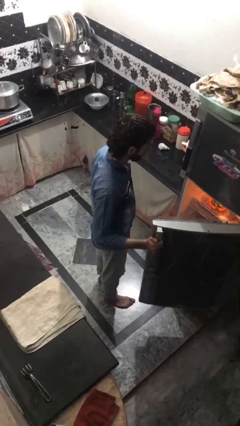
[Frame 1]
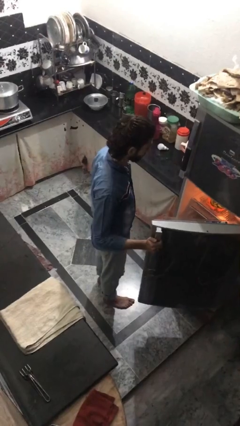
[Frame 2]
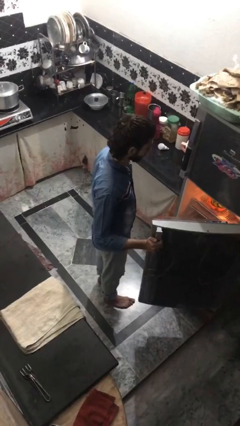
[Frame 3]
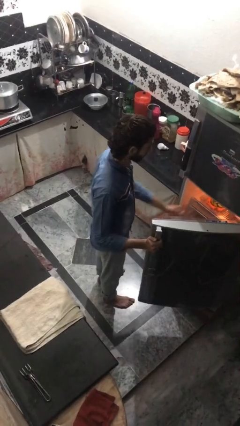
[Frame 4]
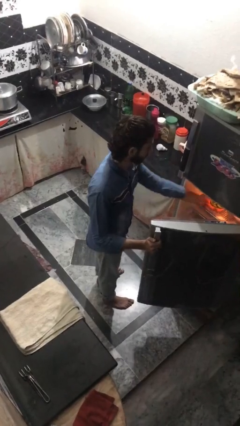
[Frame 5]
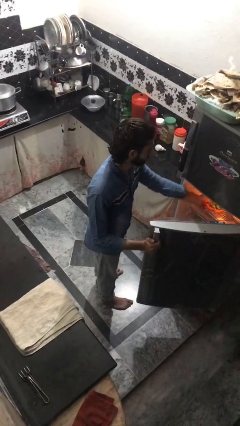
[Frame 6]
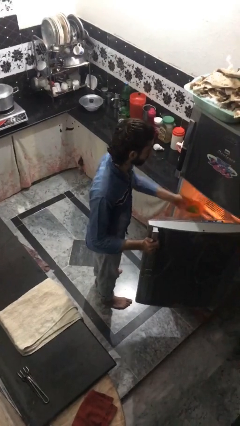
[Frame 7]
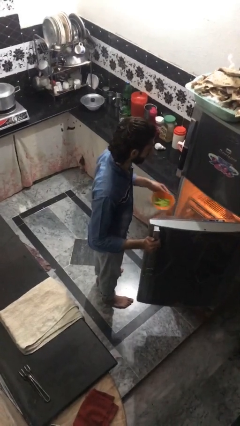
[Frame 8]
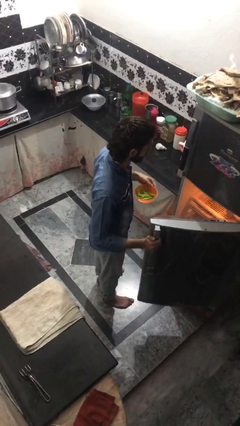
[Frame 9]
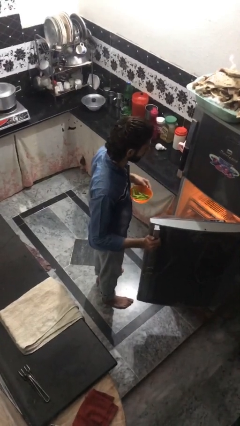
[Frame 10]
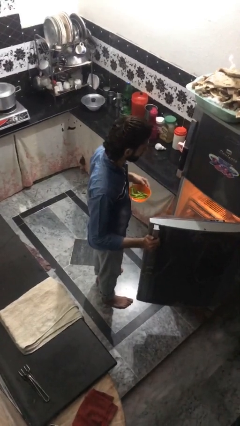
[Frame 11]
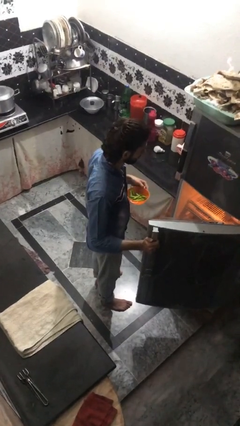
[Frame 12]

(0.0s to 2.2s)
person takes object from refrigerator

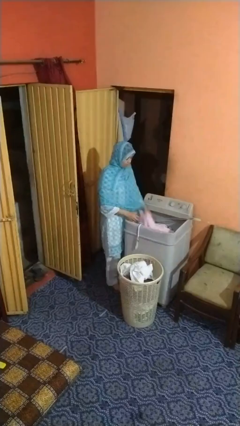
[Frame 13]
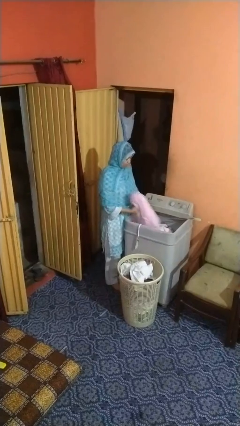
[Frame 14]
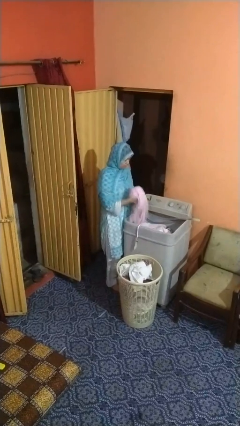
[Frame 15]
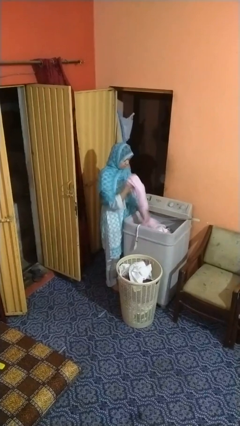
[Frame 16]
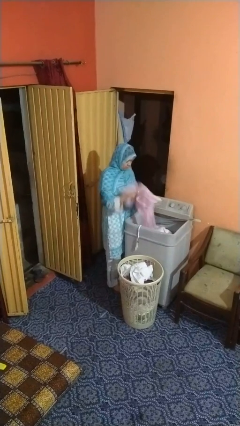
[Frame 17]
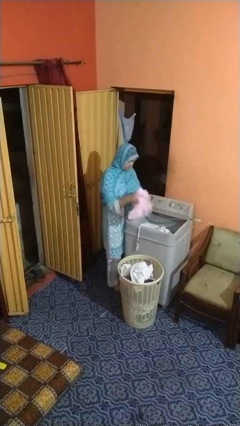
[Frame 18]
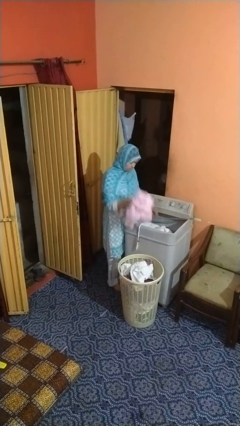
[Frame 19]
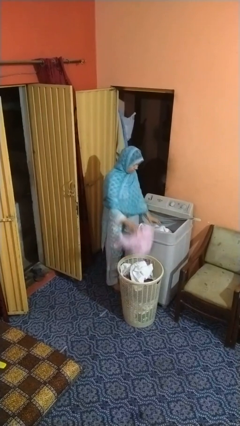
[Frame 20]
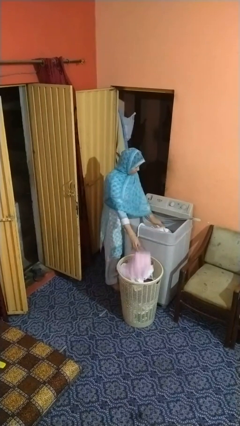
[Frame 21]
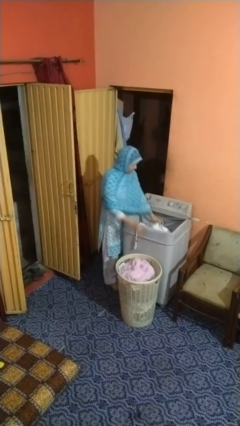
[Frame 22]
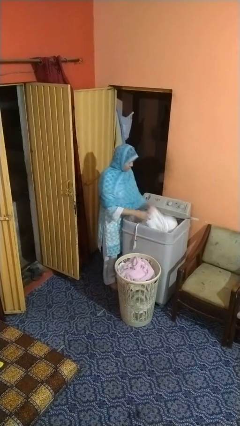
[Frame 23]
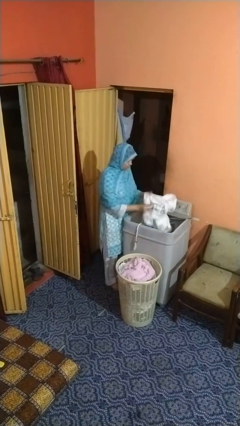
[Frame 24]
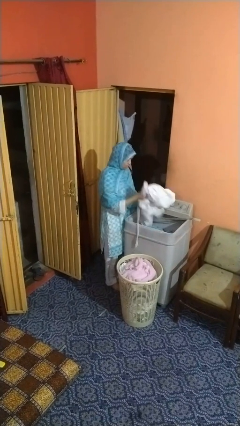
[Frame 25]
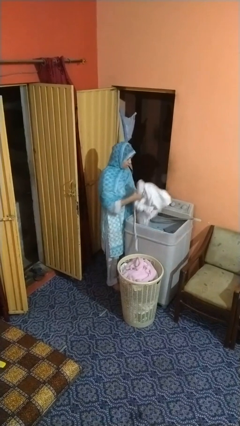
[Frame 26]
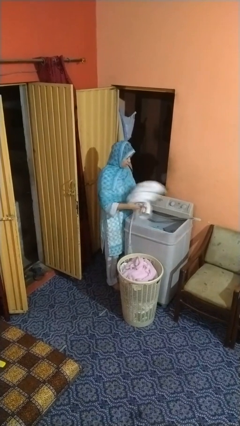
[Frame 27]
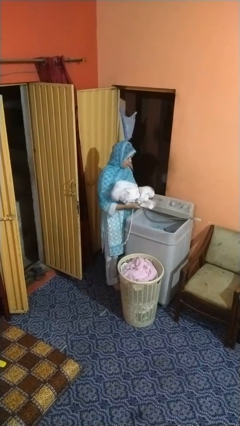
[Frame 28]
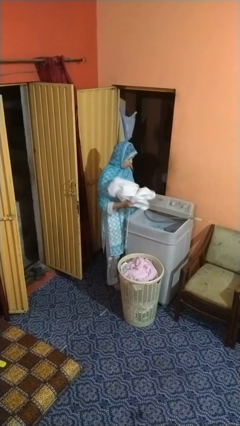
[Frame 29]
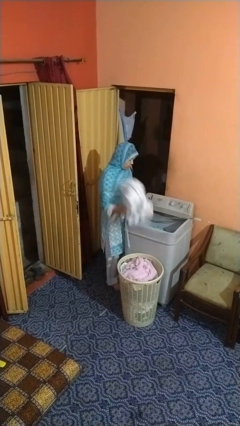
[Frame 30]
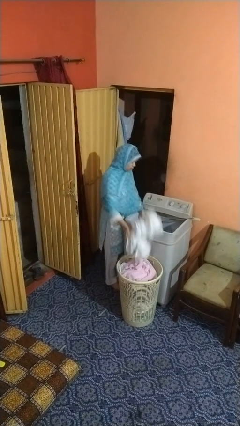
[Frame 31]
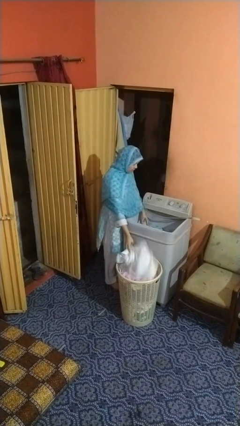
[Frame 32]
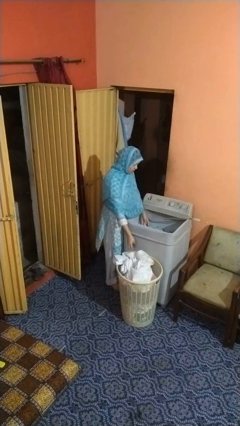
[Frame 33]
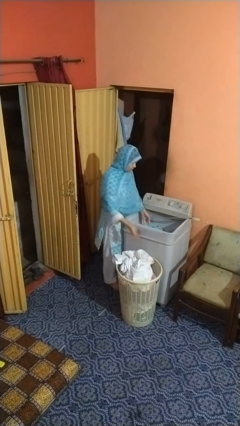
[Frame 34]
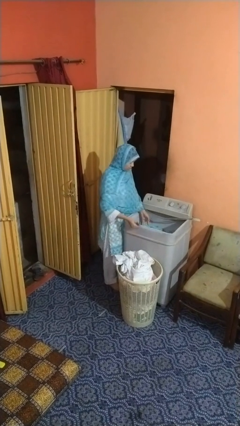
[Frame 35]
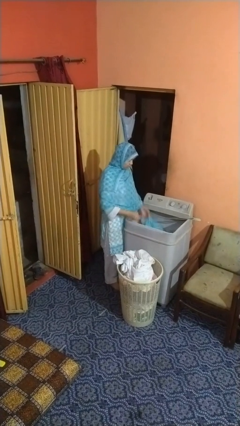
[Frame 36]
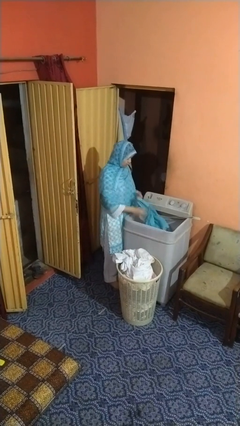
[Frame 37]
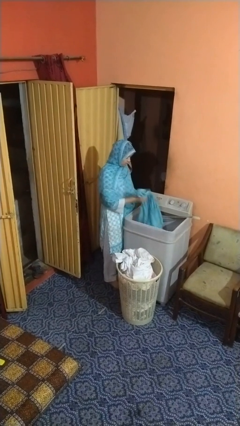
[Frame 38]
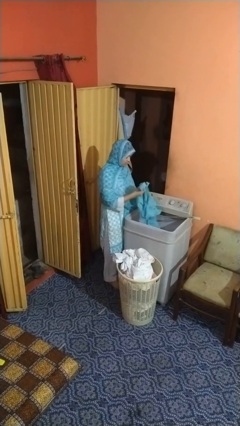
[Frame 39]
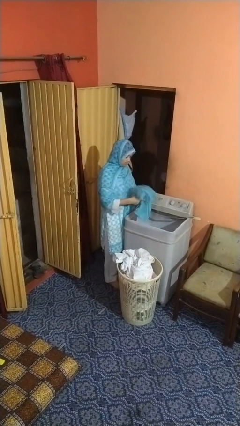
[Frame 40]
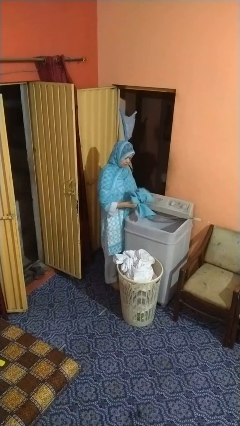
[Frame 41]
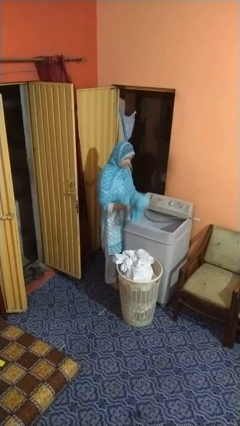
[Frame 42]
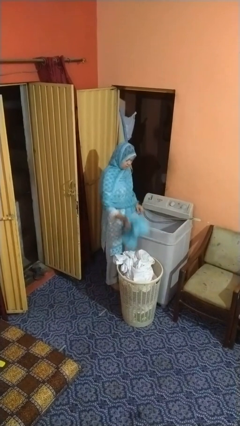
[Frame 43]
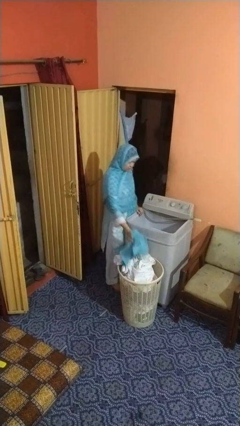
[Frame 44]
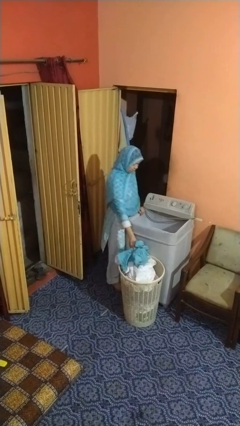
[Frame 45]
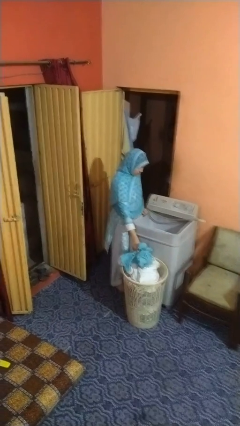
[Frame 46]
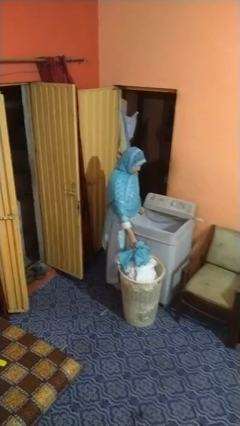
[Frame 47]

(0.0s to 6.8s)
person unloads clotheswasher

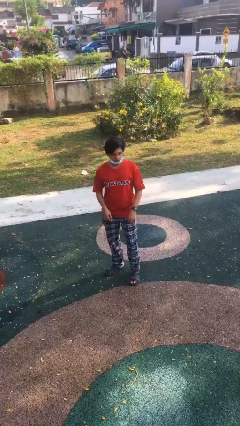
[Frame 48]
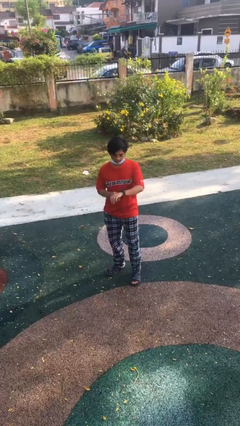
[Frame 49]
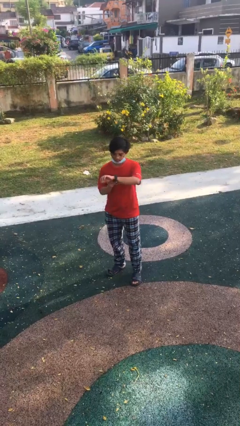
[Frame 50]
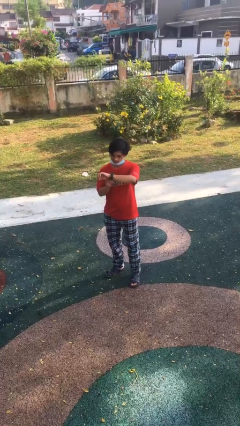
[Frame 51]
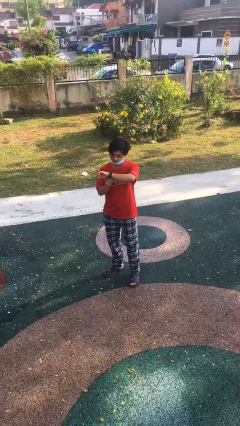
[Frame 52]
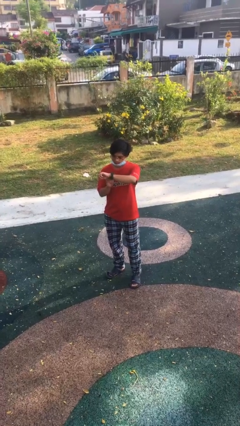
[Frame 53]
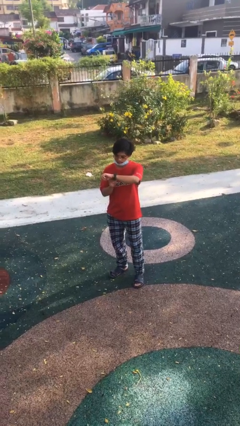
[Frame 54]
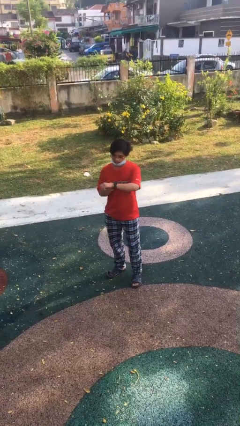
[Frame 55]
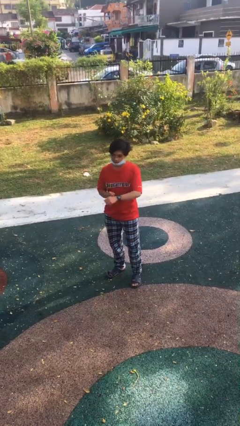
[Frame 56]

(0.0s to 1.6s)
person looks at wristwatch

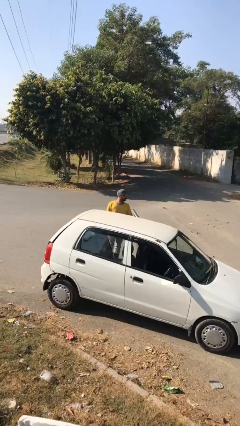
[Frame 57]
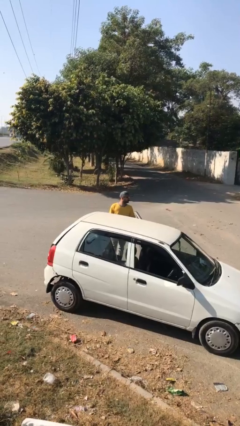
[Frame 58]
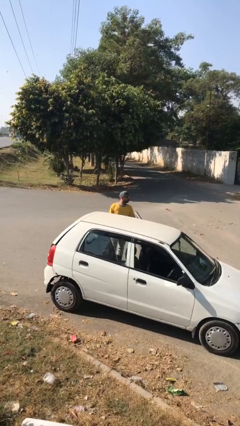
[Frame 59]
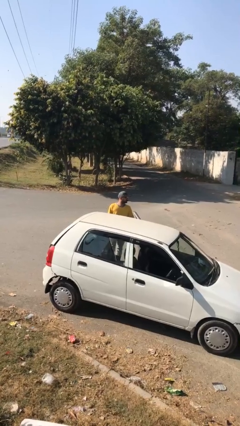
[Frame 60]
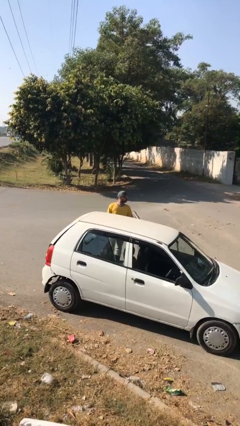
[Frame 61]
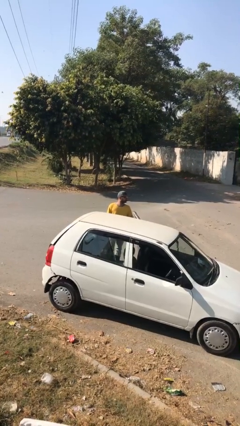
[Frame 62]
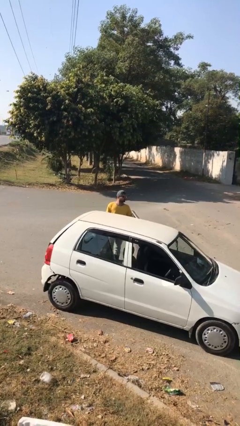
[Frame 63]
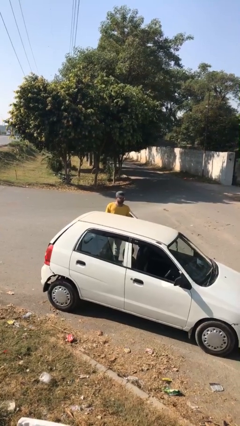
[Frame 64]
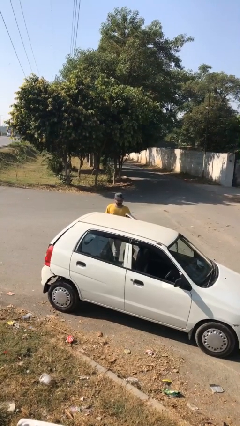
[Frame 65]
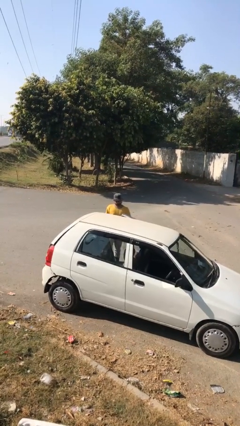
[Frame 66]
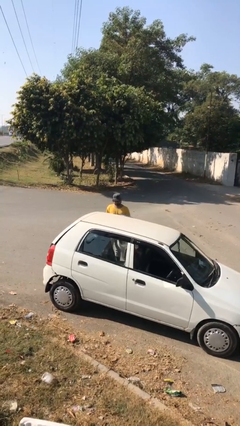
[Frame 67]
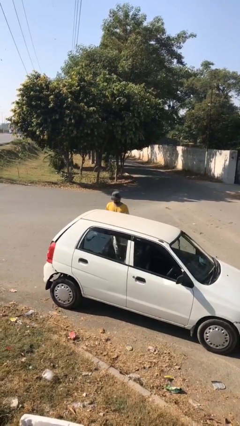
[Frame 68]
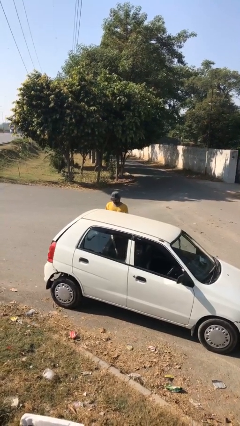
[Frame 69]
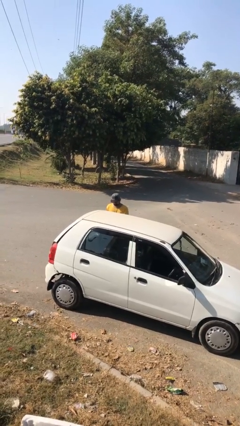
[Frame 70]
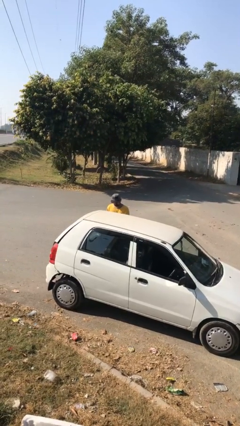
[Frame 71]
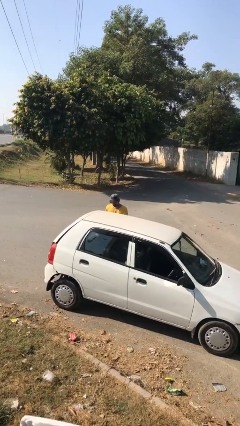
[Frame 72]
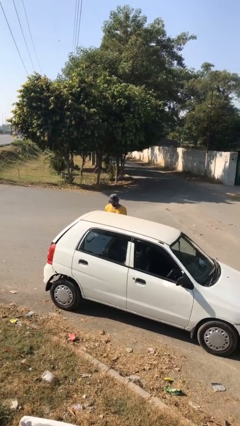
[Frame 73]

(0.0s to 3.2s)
person closes car door

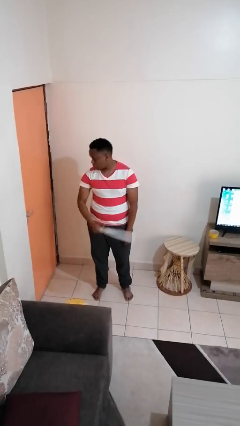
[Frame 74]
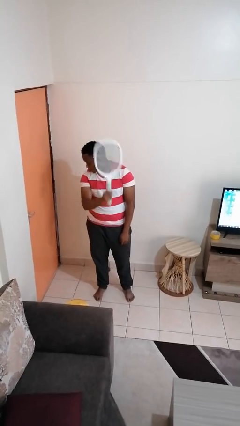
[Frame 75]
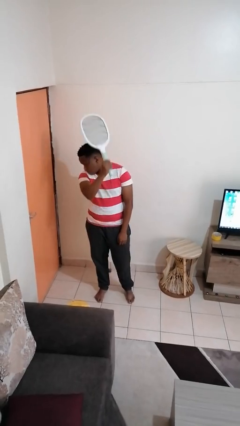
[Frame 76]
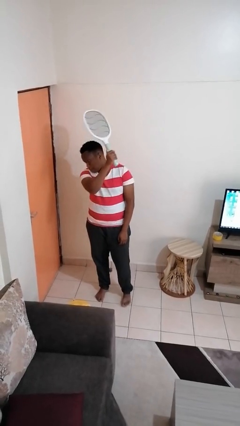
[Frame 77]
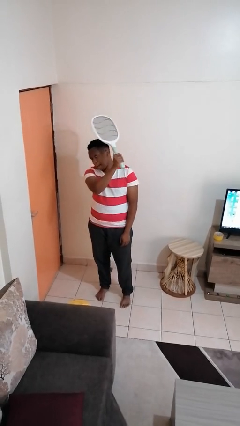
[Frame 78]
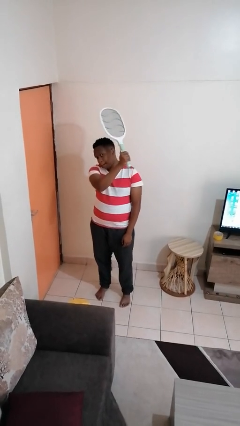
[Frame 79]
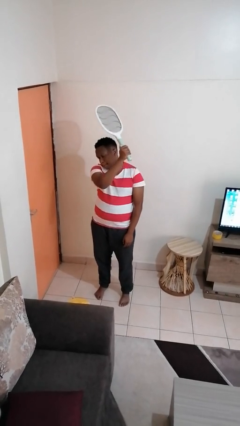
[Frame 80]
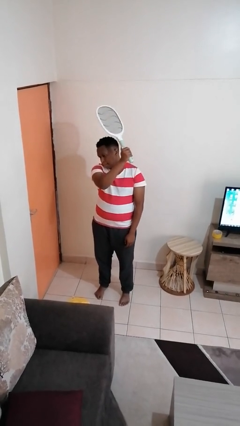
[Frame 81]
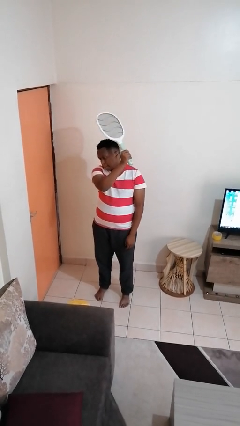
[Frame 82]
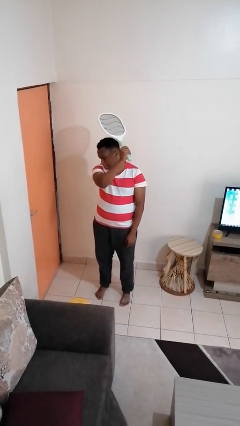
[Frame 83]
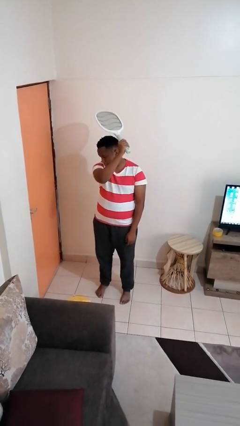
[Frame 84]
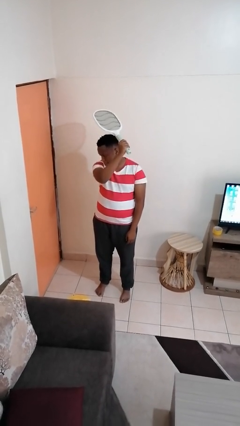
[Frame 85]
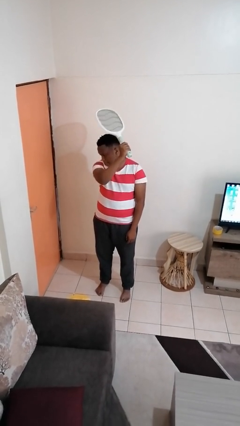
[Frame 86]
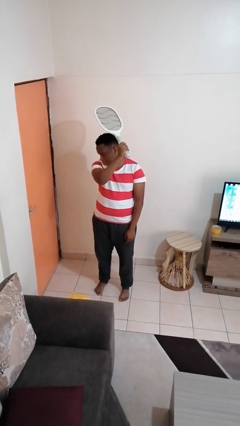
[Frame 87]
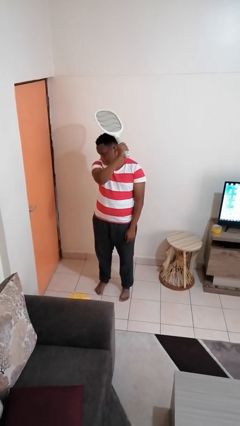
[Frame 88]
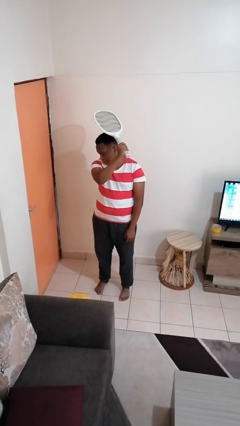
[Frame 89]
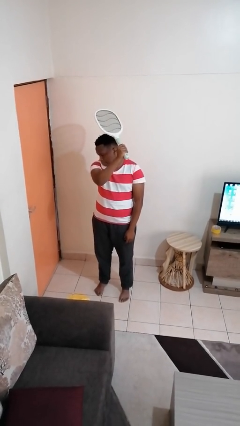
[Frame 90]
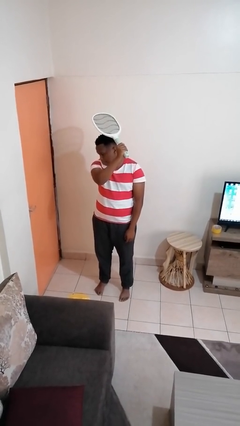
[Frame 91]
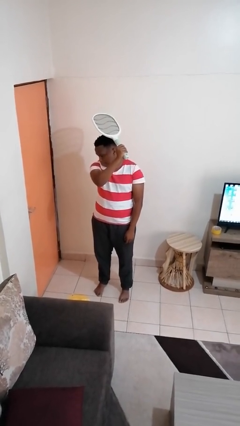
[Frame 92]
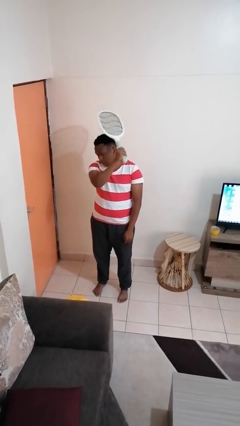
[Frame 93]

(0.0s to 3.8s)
person holds object above head
